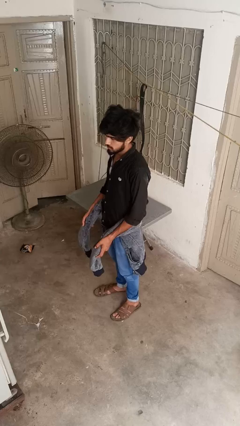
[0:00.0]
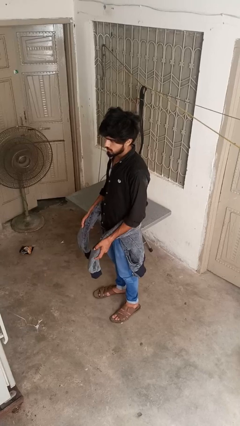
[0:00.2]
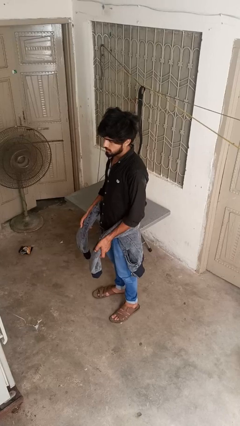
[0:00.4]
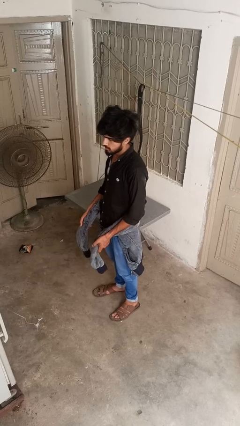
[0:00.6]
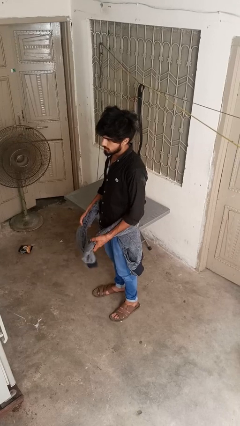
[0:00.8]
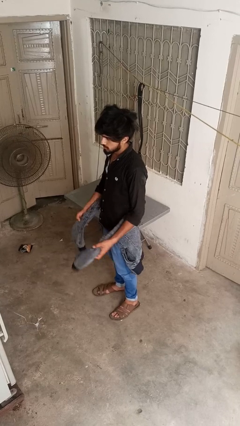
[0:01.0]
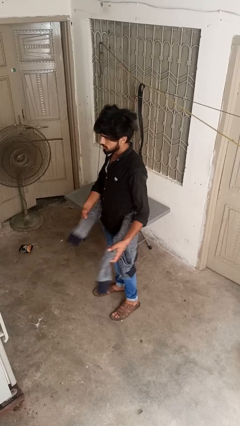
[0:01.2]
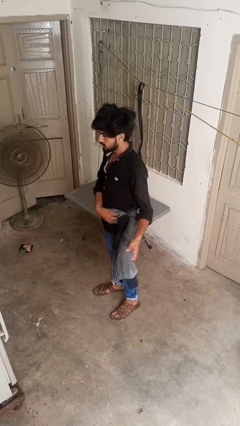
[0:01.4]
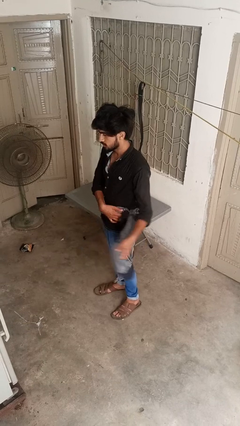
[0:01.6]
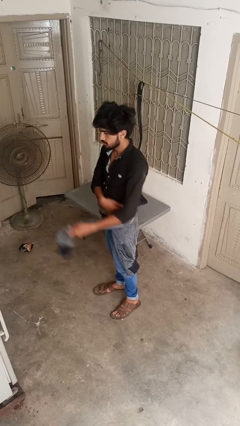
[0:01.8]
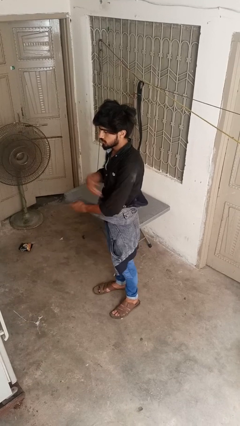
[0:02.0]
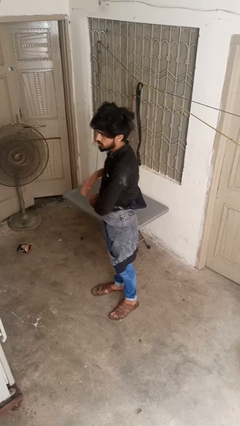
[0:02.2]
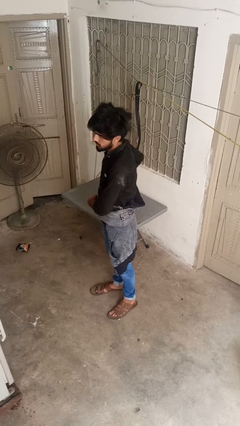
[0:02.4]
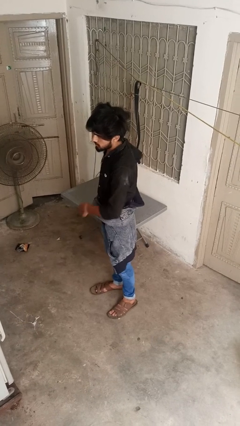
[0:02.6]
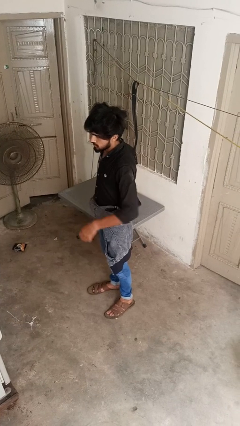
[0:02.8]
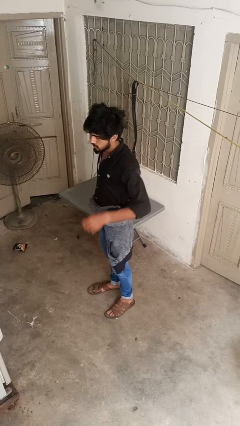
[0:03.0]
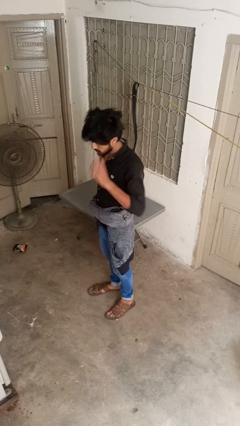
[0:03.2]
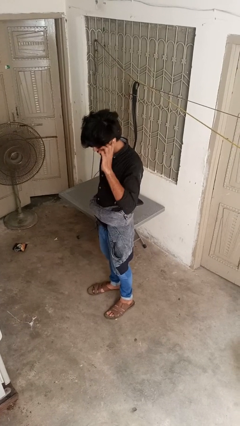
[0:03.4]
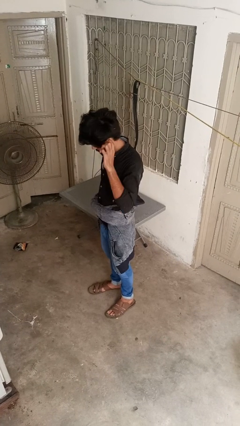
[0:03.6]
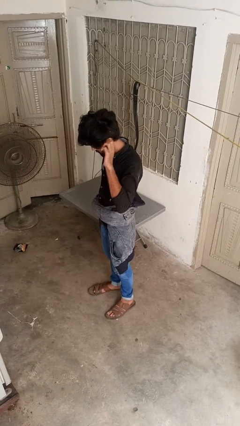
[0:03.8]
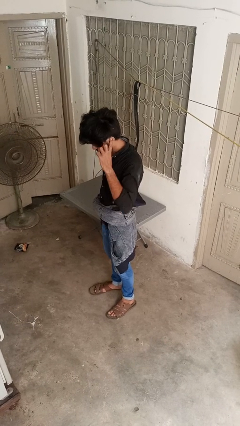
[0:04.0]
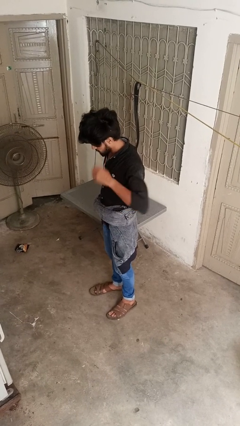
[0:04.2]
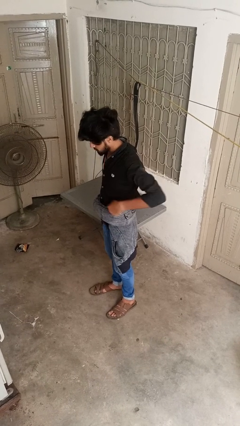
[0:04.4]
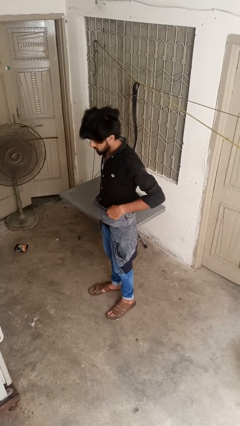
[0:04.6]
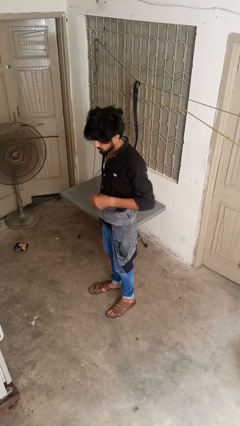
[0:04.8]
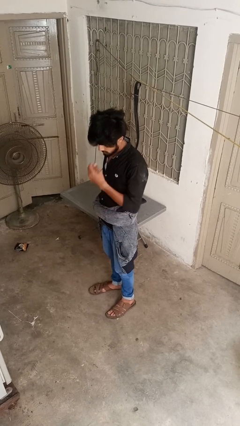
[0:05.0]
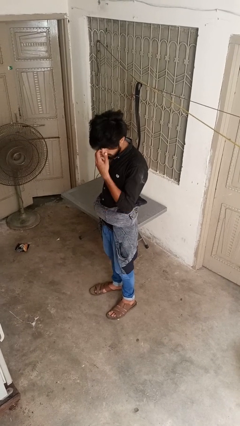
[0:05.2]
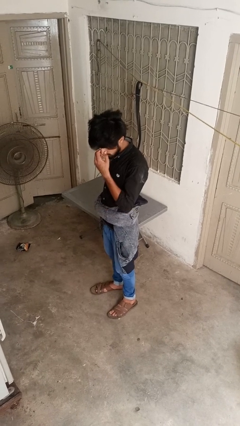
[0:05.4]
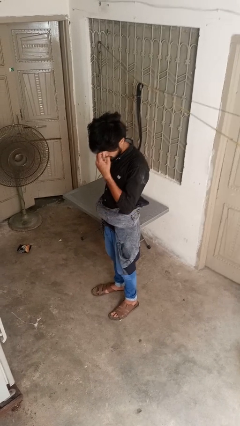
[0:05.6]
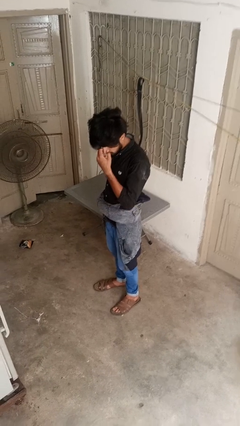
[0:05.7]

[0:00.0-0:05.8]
person ties jacket around waist

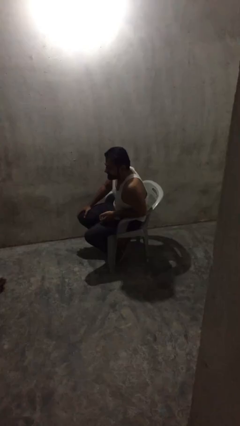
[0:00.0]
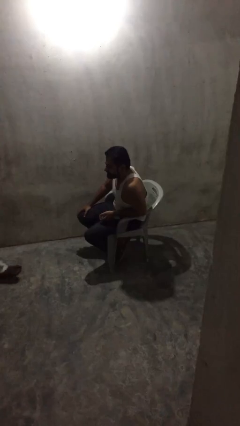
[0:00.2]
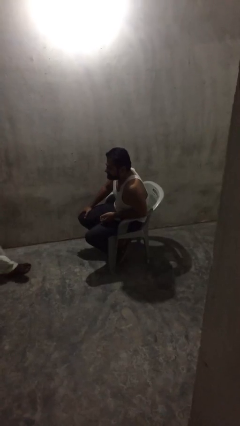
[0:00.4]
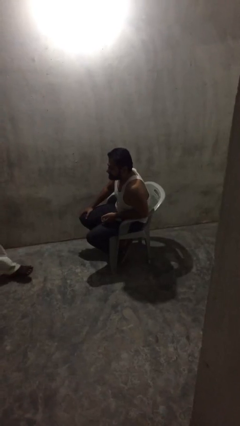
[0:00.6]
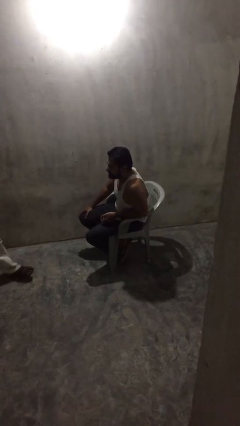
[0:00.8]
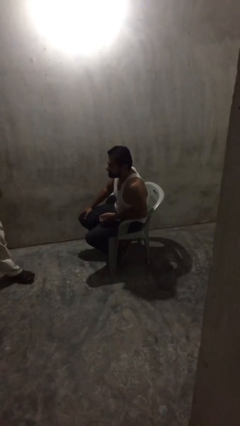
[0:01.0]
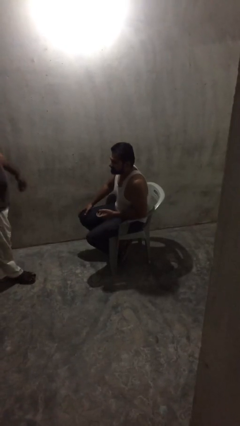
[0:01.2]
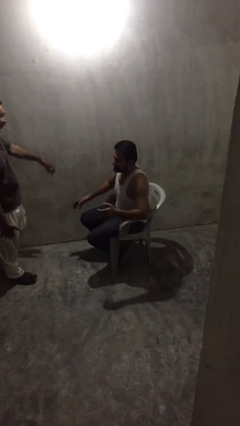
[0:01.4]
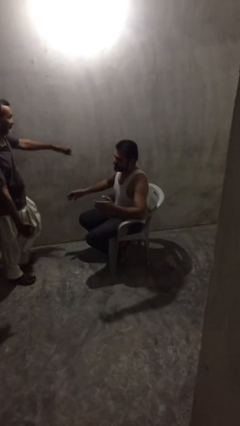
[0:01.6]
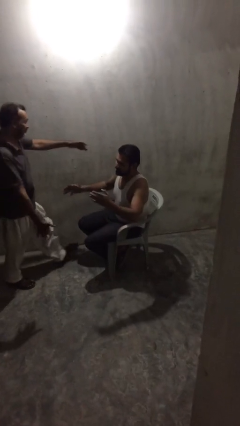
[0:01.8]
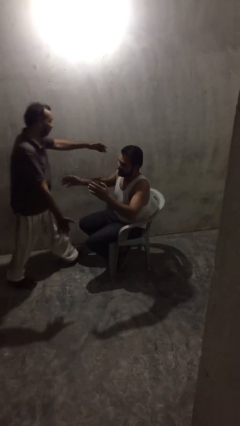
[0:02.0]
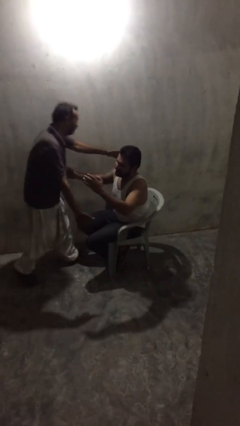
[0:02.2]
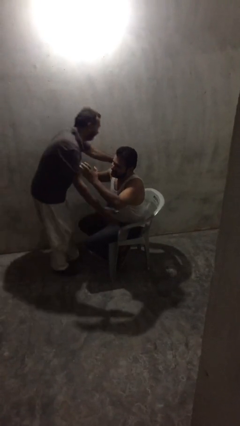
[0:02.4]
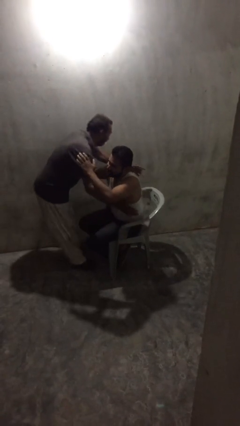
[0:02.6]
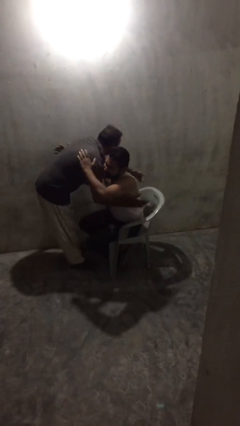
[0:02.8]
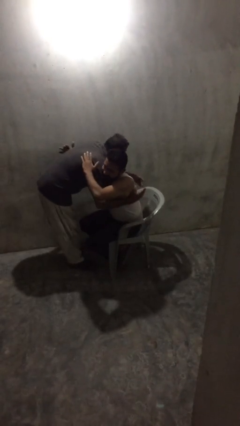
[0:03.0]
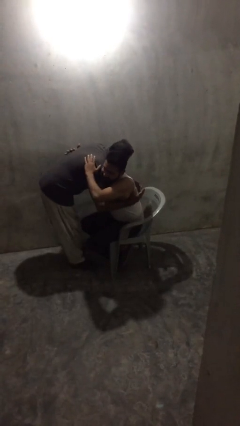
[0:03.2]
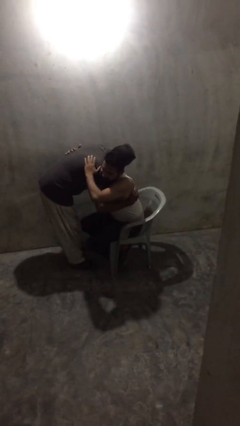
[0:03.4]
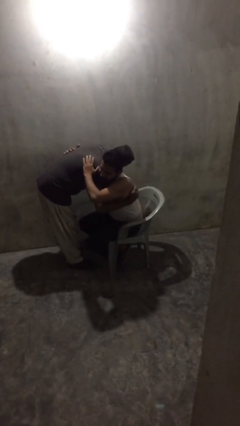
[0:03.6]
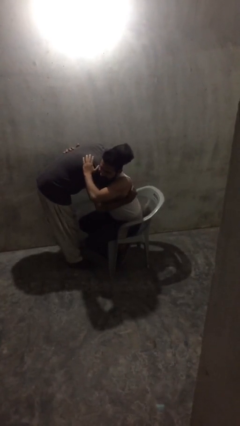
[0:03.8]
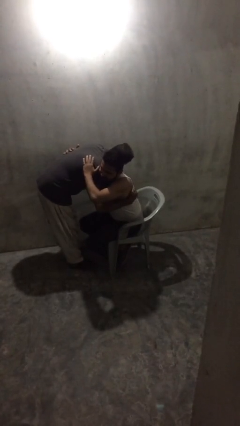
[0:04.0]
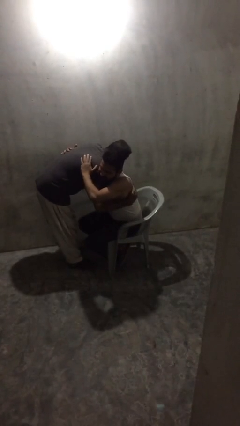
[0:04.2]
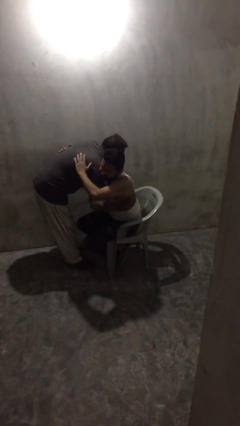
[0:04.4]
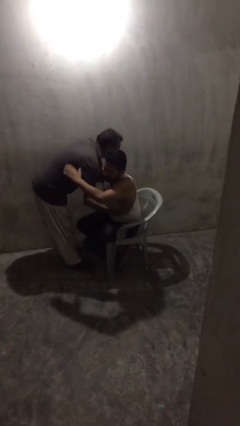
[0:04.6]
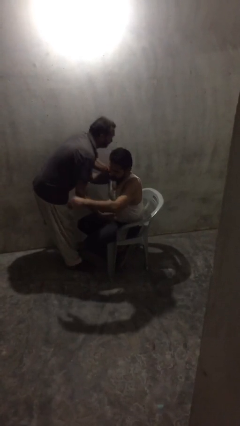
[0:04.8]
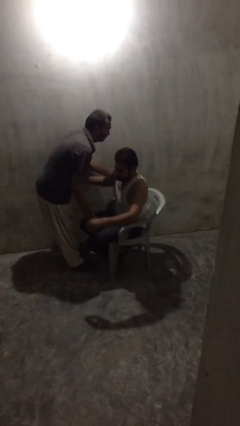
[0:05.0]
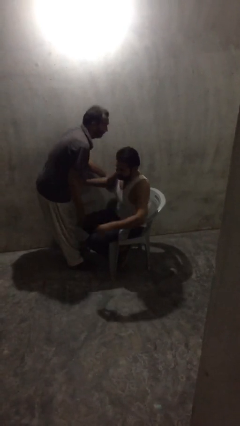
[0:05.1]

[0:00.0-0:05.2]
person embraces person

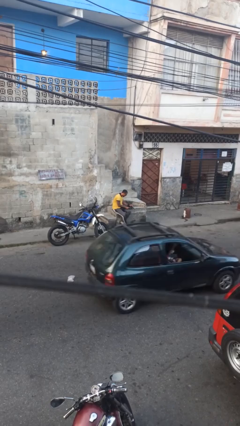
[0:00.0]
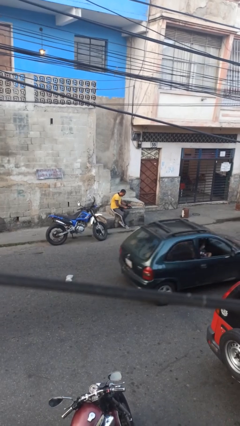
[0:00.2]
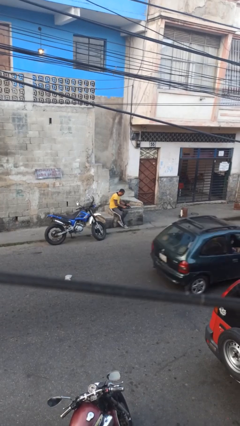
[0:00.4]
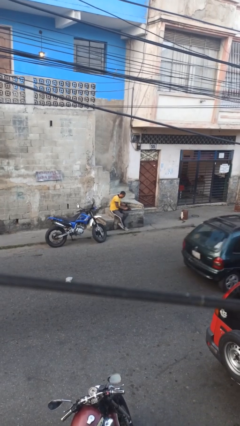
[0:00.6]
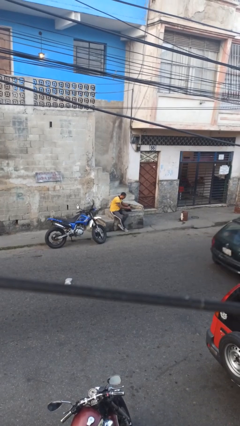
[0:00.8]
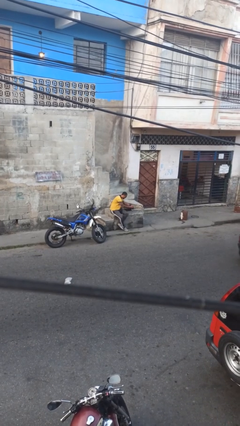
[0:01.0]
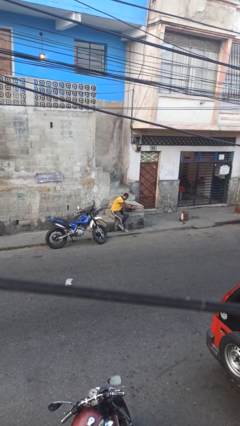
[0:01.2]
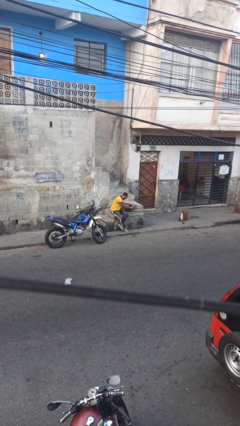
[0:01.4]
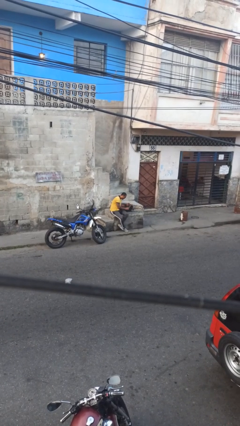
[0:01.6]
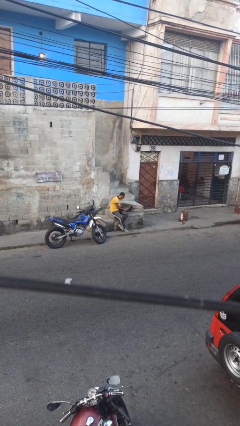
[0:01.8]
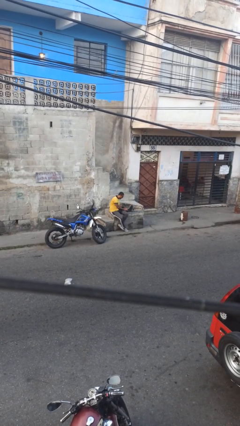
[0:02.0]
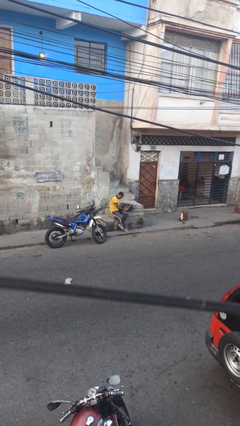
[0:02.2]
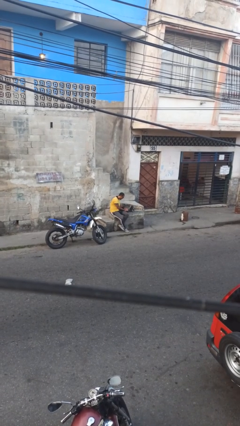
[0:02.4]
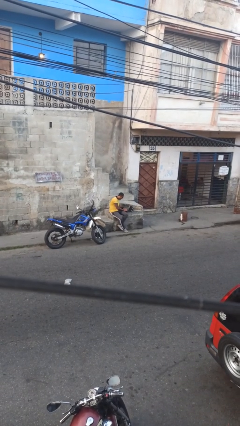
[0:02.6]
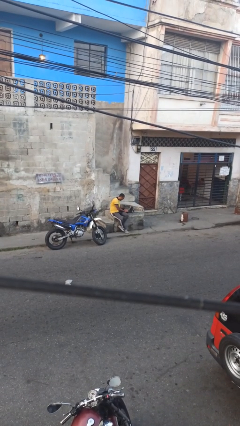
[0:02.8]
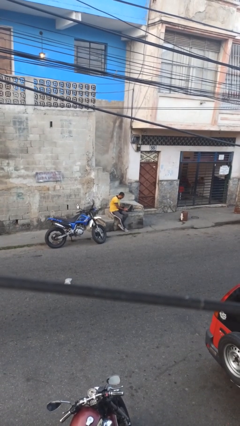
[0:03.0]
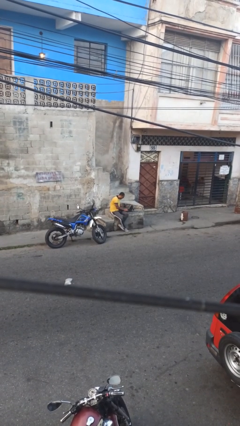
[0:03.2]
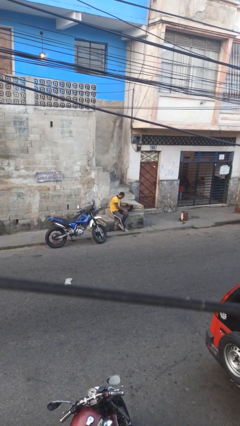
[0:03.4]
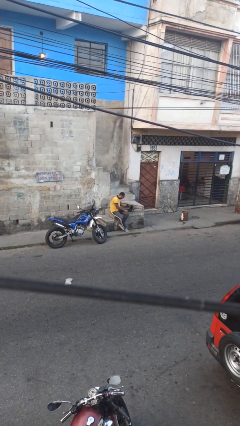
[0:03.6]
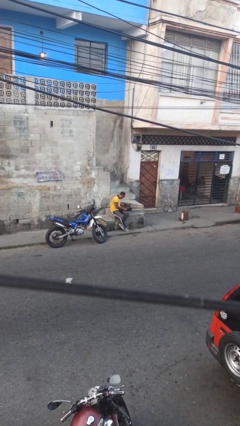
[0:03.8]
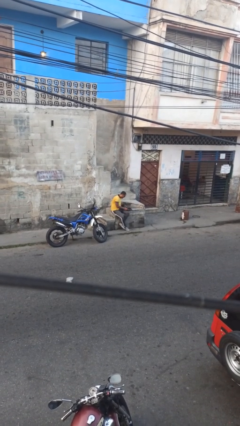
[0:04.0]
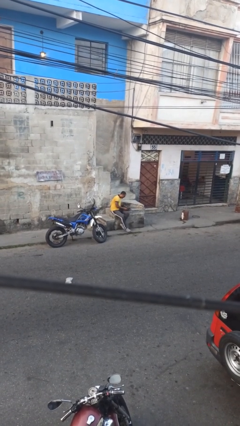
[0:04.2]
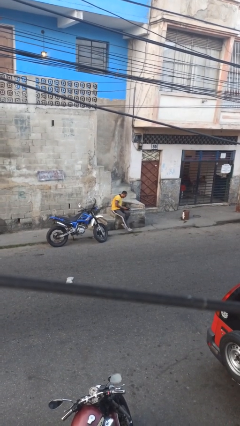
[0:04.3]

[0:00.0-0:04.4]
person interacts with laptop

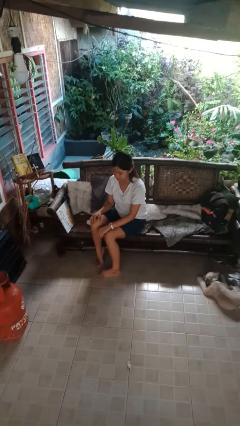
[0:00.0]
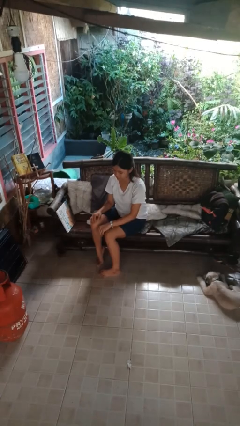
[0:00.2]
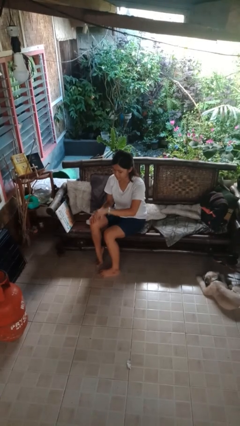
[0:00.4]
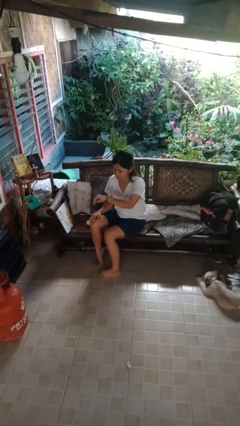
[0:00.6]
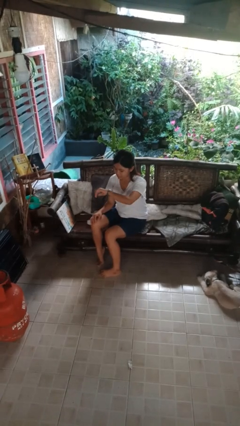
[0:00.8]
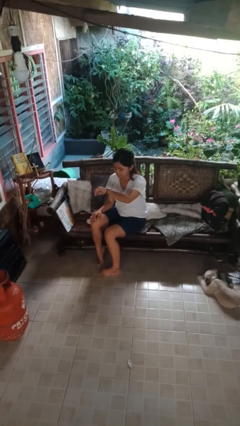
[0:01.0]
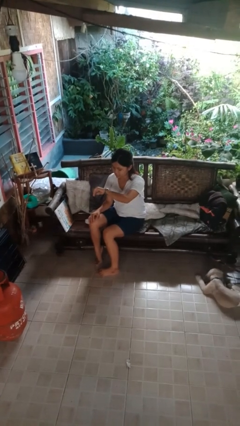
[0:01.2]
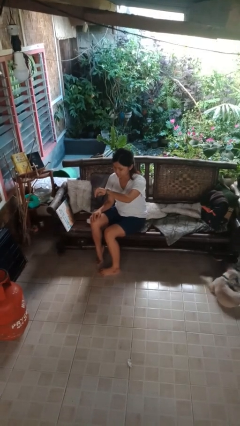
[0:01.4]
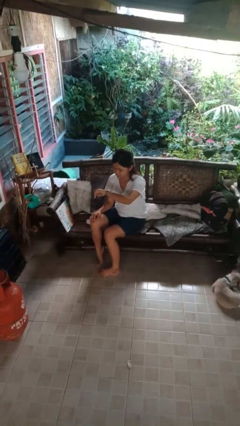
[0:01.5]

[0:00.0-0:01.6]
person looks at wristwatch

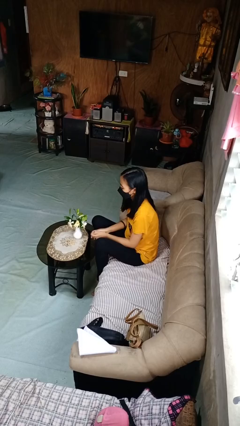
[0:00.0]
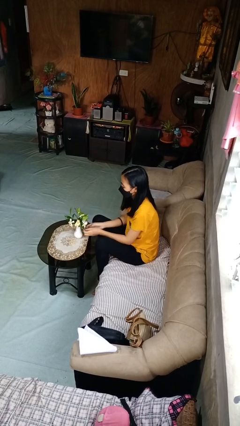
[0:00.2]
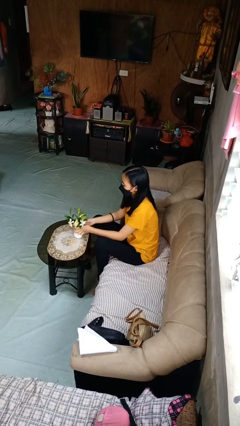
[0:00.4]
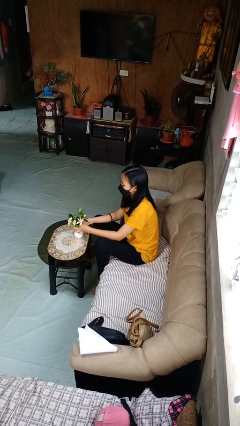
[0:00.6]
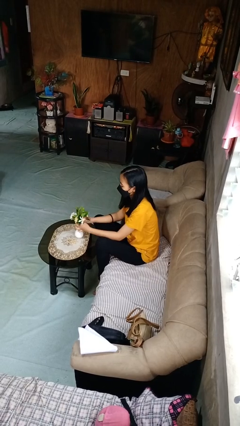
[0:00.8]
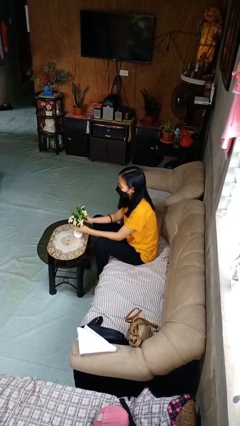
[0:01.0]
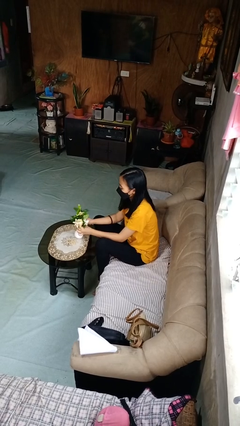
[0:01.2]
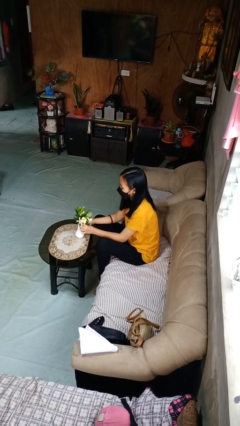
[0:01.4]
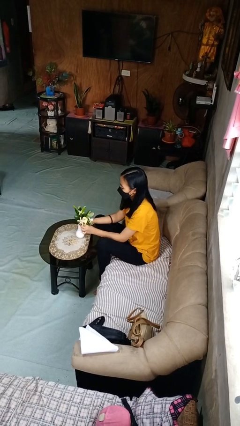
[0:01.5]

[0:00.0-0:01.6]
person arranges flowers in vase
